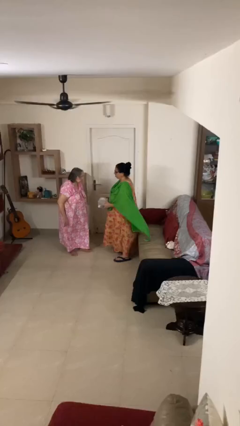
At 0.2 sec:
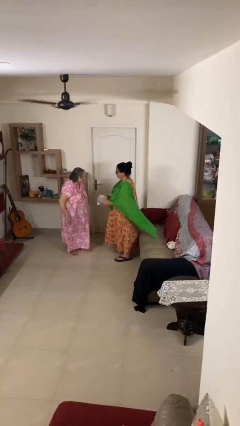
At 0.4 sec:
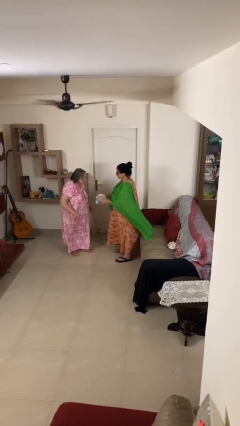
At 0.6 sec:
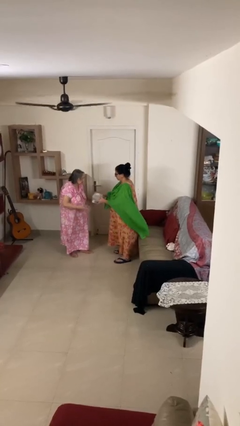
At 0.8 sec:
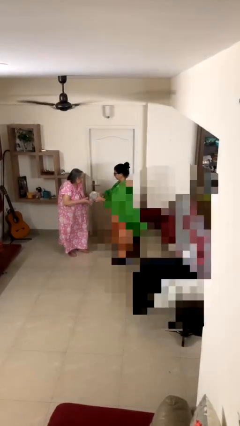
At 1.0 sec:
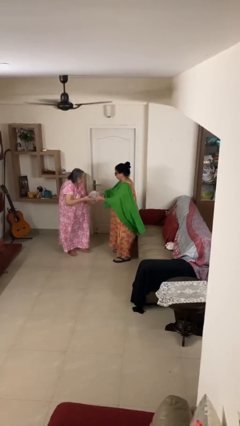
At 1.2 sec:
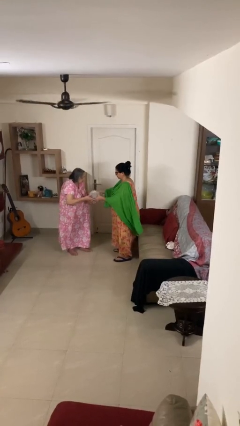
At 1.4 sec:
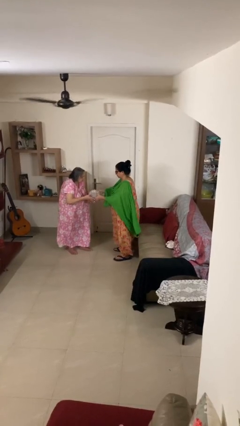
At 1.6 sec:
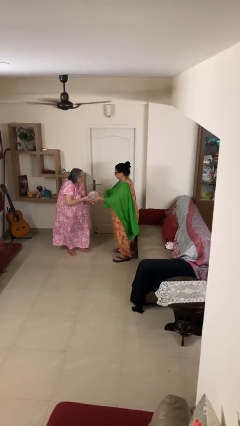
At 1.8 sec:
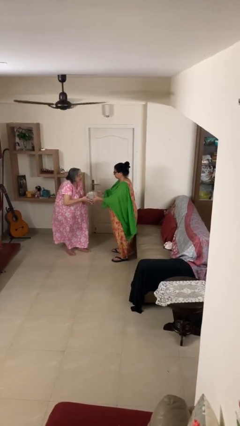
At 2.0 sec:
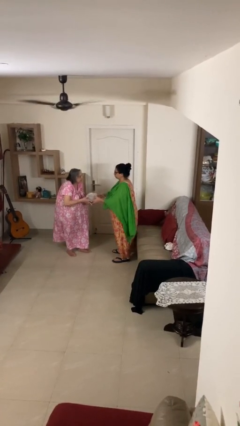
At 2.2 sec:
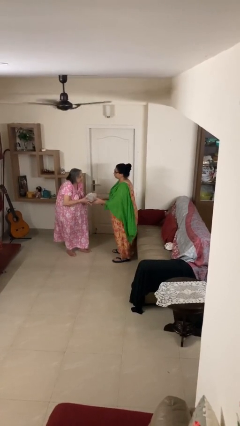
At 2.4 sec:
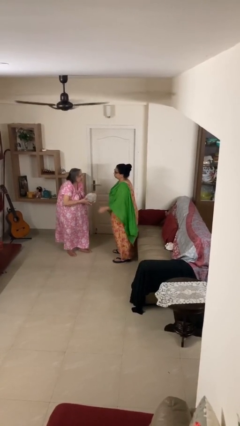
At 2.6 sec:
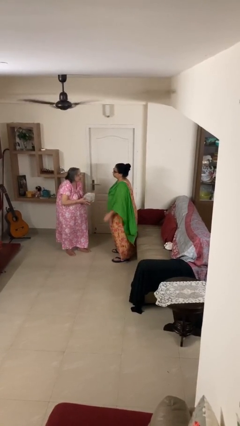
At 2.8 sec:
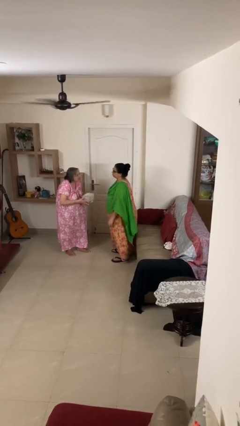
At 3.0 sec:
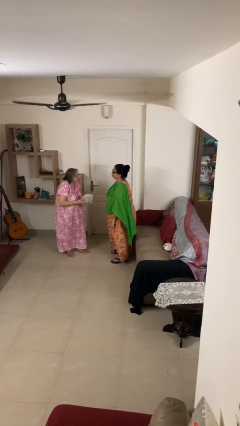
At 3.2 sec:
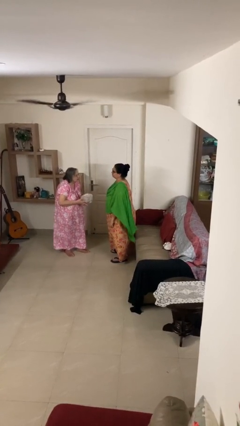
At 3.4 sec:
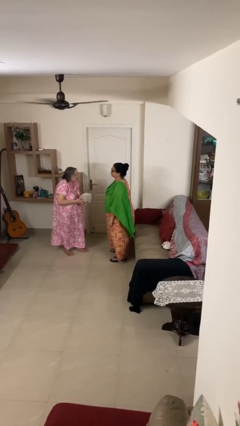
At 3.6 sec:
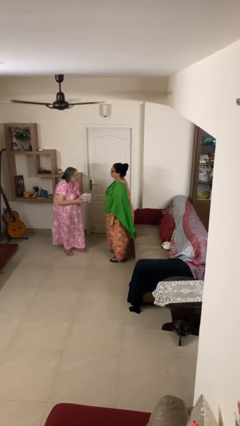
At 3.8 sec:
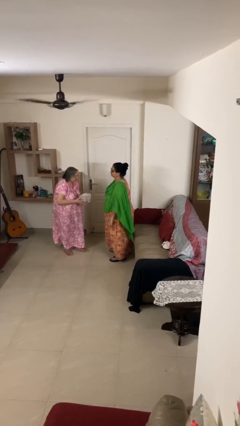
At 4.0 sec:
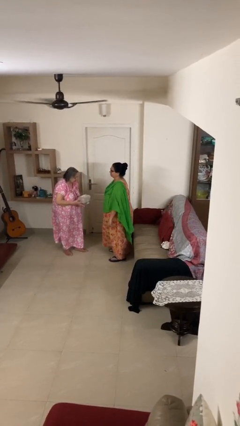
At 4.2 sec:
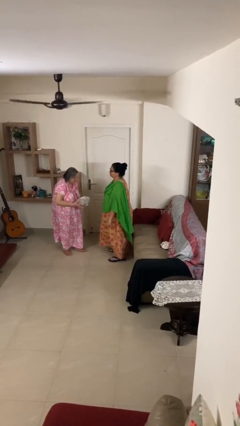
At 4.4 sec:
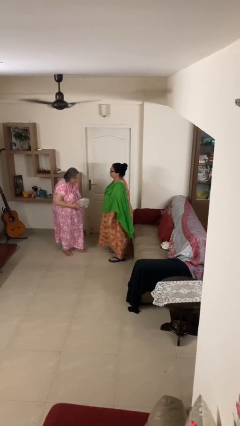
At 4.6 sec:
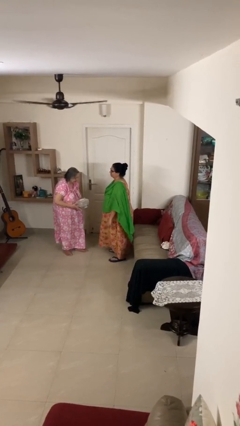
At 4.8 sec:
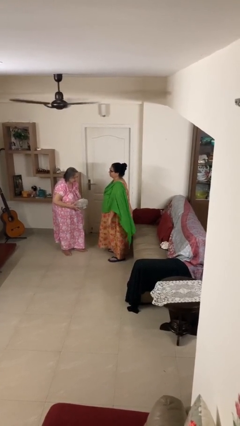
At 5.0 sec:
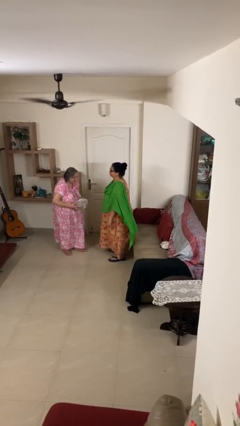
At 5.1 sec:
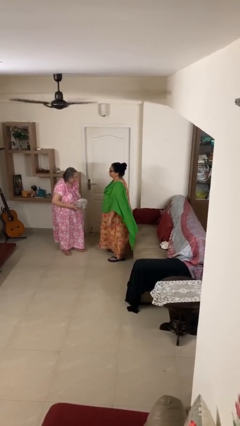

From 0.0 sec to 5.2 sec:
person transfers object to person

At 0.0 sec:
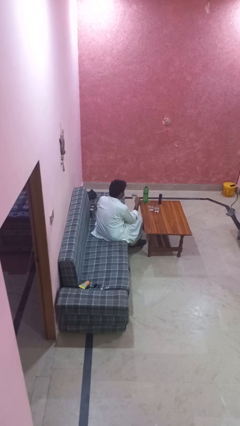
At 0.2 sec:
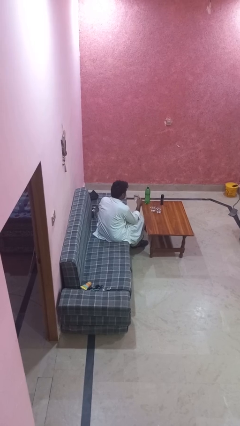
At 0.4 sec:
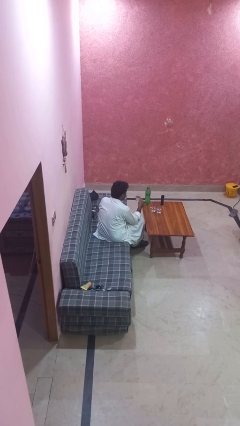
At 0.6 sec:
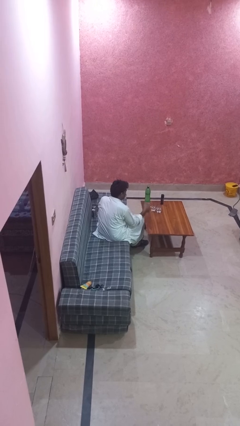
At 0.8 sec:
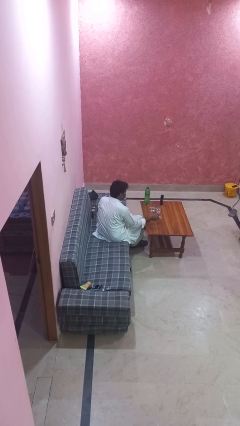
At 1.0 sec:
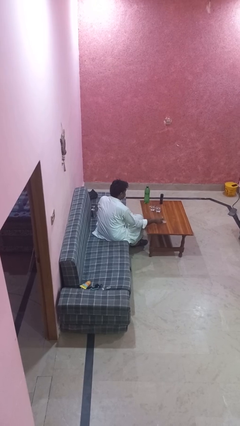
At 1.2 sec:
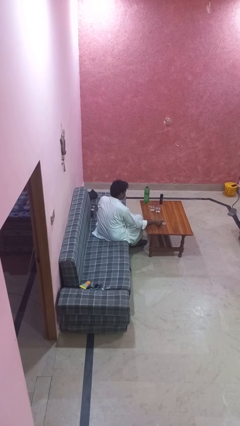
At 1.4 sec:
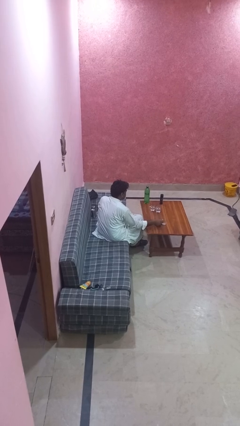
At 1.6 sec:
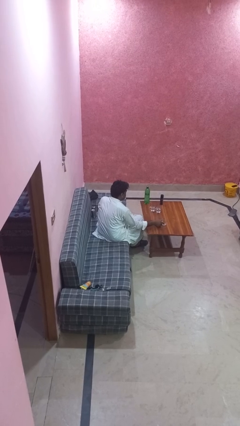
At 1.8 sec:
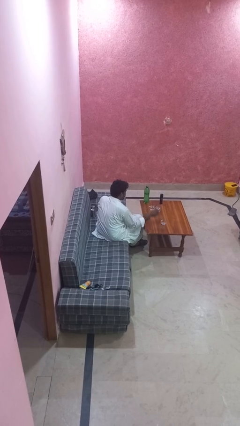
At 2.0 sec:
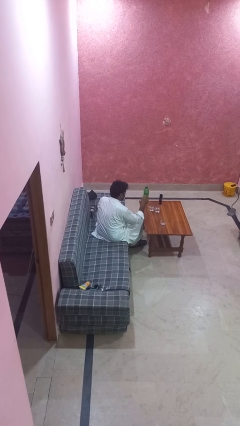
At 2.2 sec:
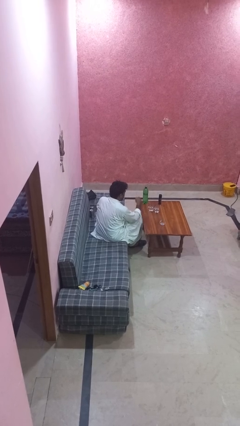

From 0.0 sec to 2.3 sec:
person puts down object on table

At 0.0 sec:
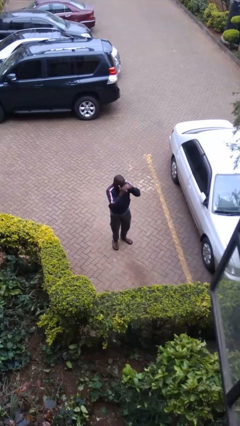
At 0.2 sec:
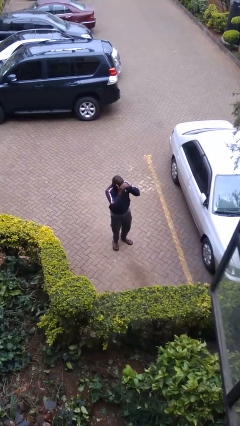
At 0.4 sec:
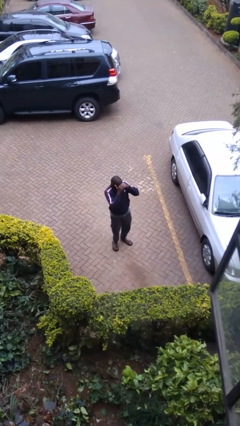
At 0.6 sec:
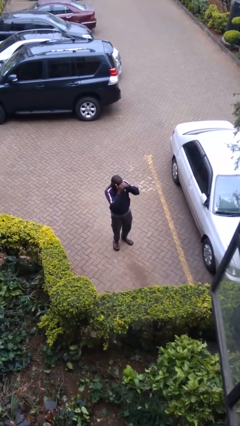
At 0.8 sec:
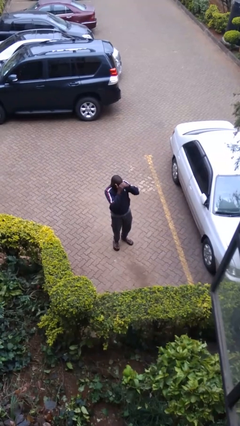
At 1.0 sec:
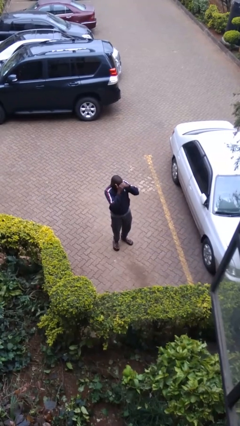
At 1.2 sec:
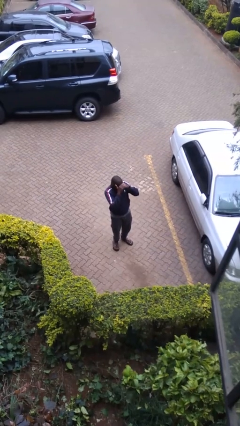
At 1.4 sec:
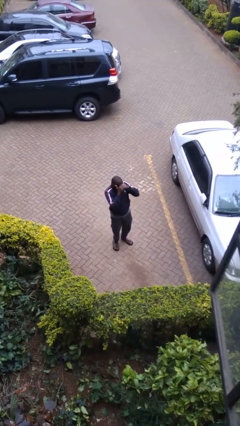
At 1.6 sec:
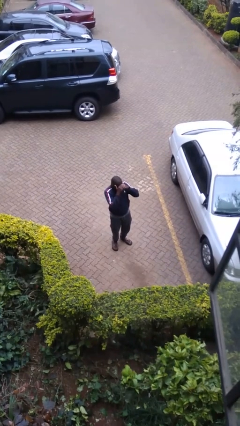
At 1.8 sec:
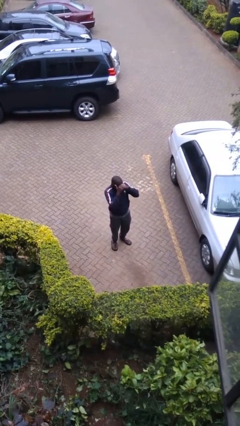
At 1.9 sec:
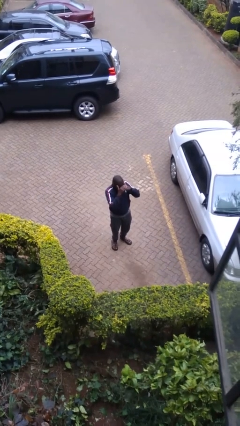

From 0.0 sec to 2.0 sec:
person shades eyes

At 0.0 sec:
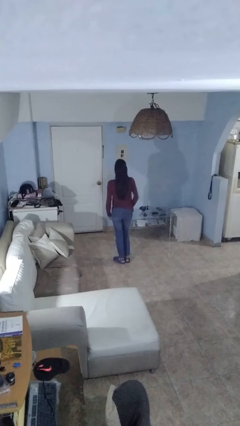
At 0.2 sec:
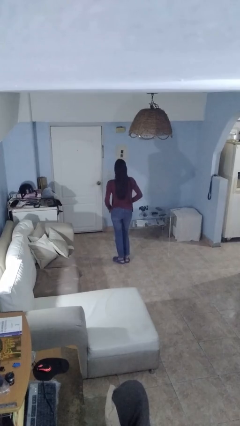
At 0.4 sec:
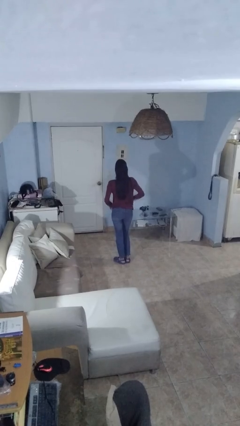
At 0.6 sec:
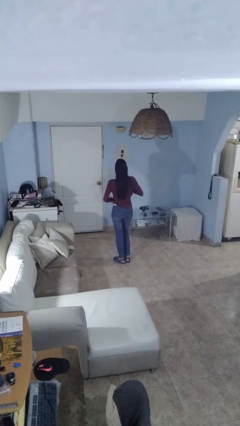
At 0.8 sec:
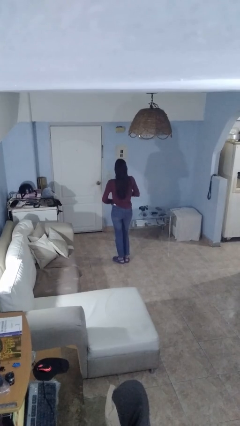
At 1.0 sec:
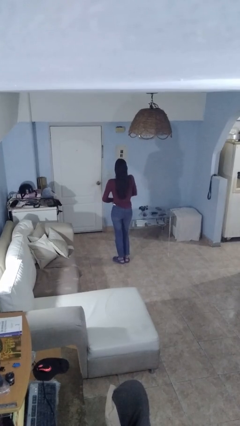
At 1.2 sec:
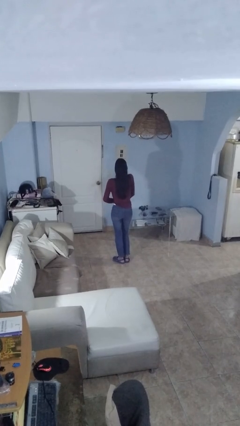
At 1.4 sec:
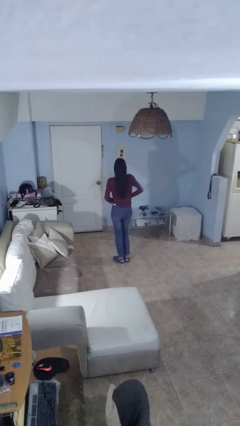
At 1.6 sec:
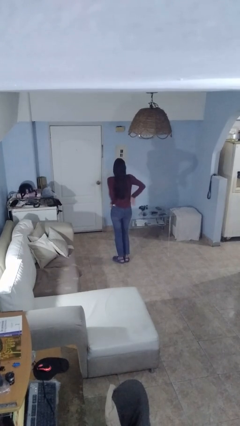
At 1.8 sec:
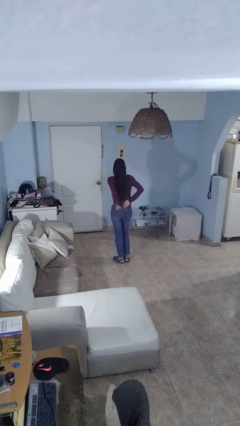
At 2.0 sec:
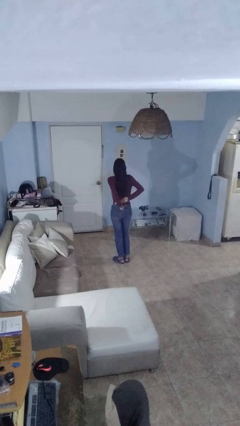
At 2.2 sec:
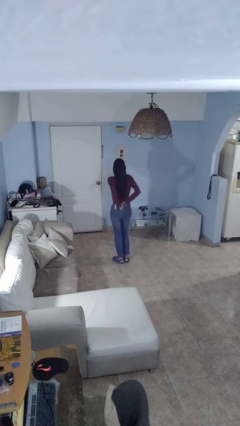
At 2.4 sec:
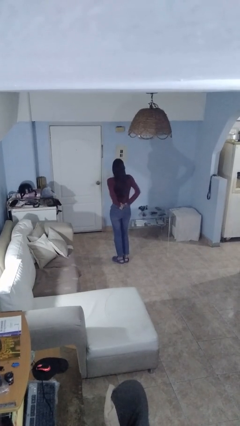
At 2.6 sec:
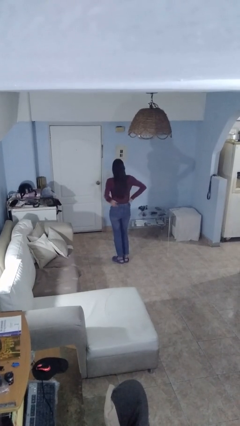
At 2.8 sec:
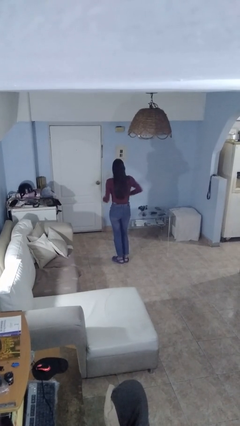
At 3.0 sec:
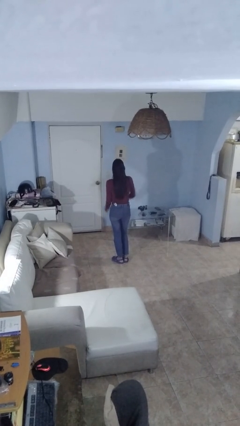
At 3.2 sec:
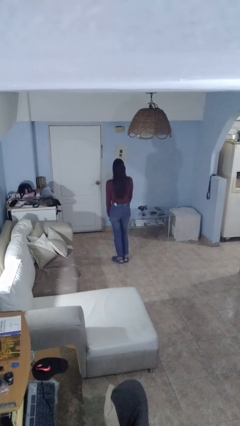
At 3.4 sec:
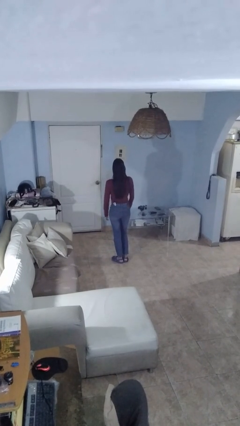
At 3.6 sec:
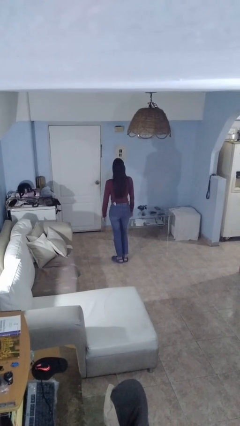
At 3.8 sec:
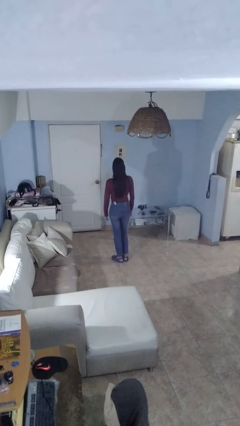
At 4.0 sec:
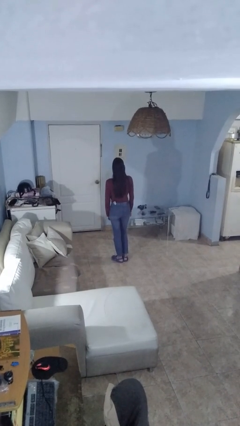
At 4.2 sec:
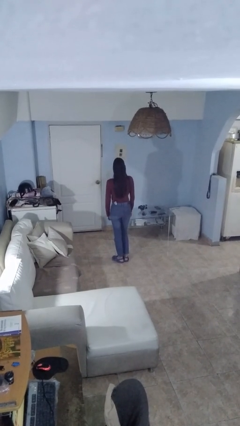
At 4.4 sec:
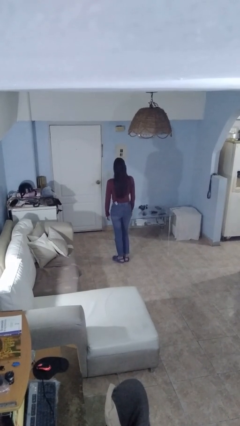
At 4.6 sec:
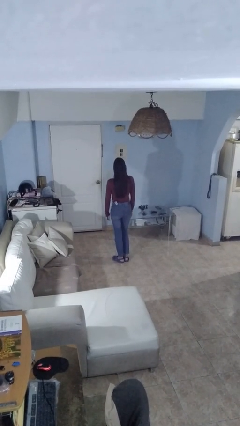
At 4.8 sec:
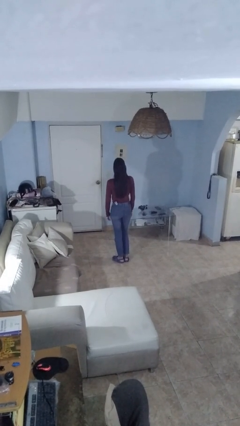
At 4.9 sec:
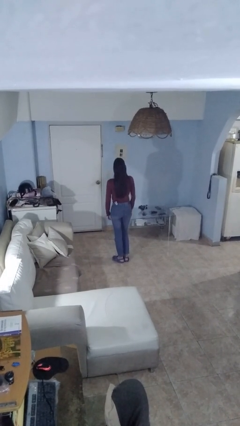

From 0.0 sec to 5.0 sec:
person tucks in shirt

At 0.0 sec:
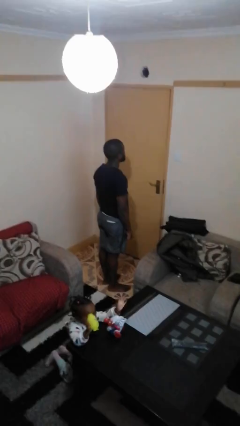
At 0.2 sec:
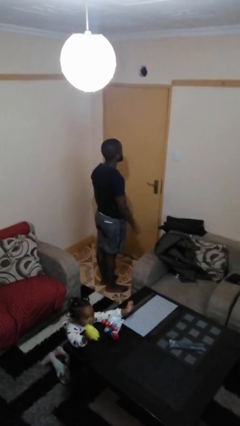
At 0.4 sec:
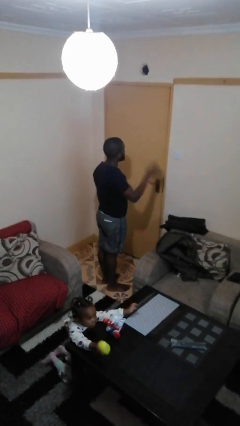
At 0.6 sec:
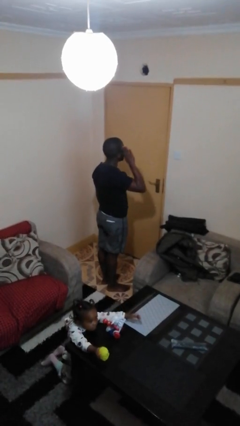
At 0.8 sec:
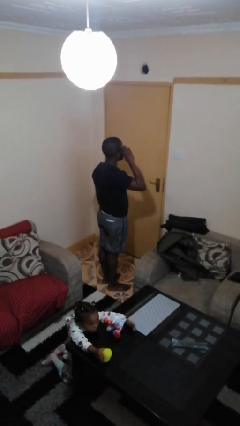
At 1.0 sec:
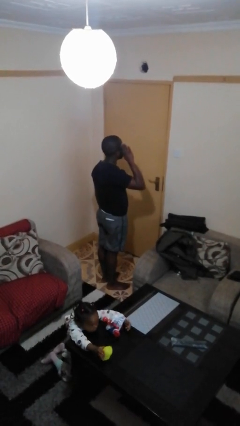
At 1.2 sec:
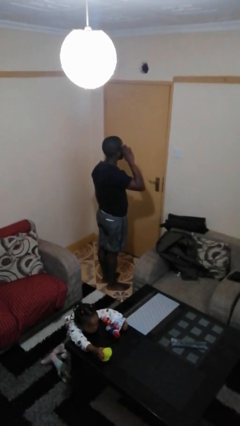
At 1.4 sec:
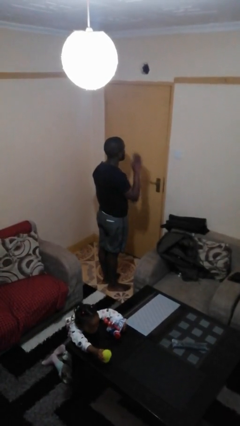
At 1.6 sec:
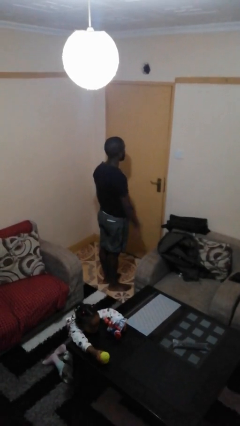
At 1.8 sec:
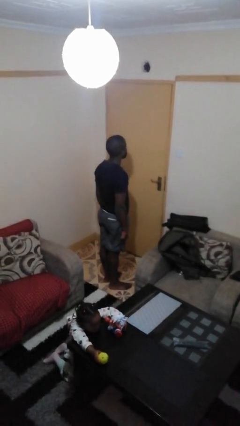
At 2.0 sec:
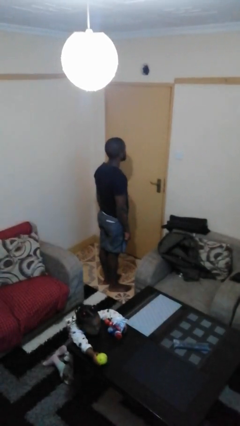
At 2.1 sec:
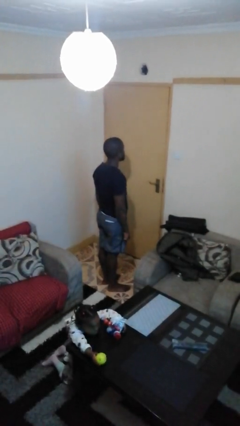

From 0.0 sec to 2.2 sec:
person salutes

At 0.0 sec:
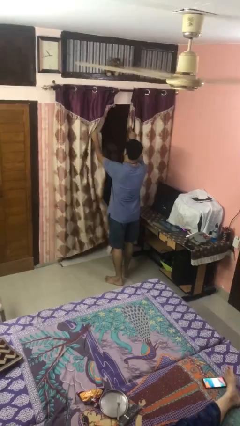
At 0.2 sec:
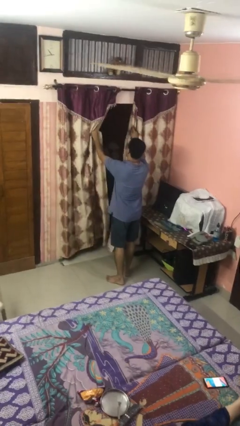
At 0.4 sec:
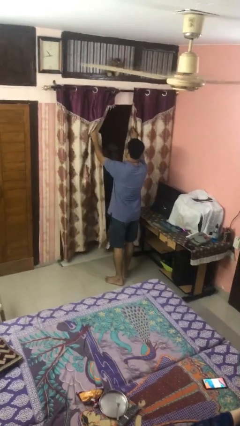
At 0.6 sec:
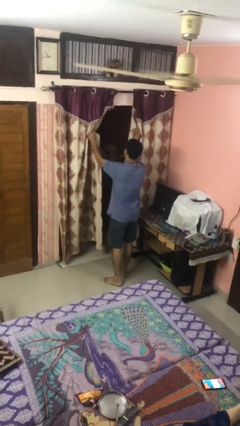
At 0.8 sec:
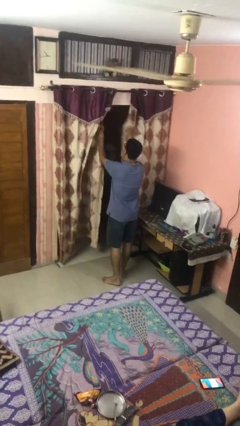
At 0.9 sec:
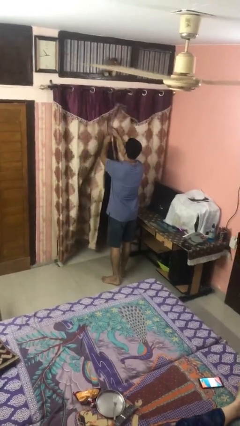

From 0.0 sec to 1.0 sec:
person closes curtains
